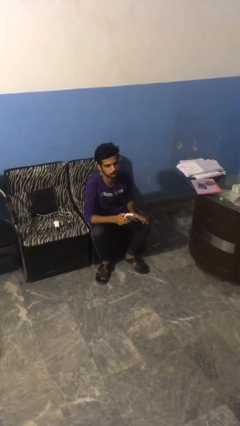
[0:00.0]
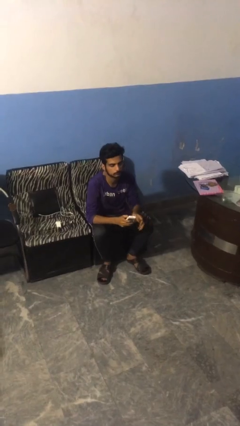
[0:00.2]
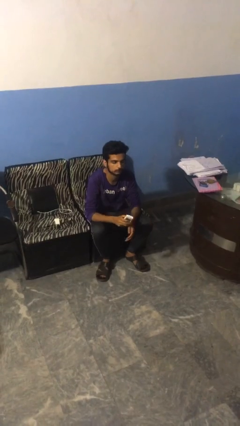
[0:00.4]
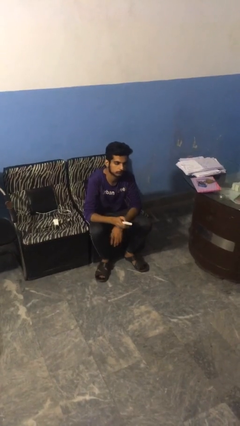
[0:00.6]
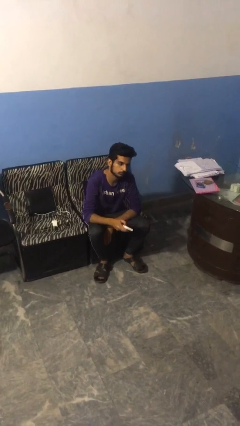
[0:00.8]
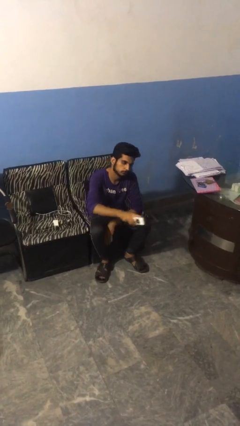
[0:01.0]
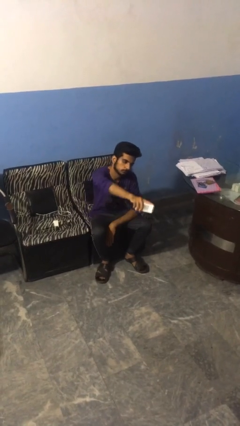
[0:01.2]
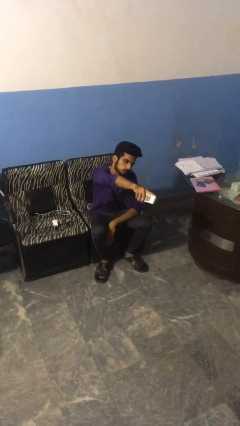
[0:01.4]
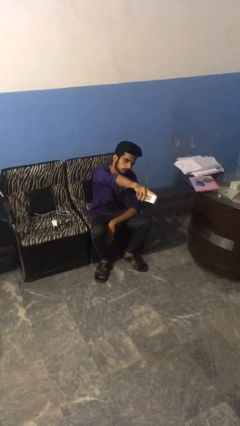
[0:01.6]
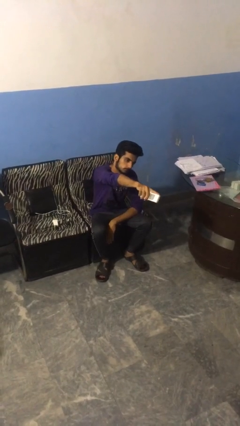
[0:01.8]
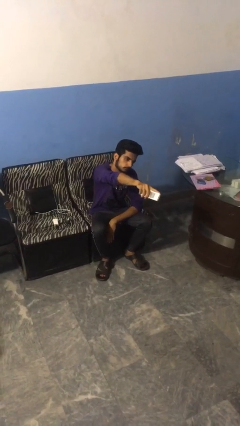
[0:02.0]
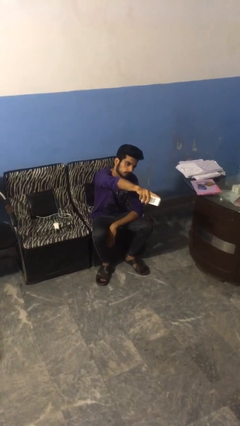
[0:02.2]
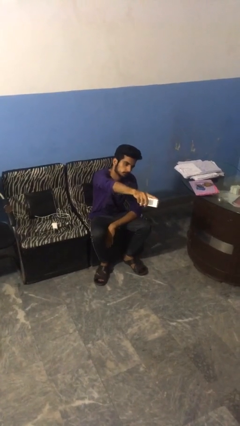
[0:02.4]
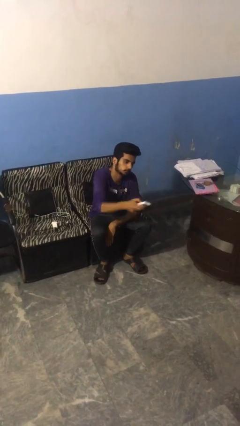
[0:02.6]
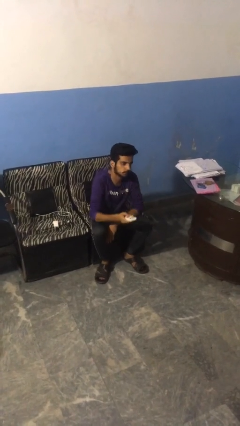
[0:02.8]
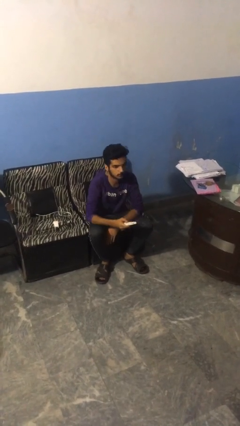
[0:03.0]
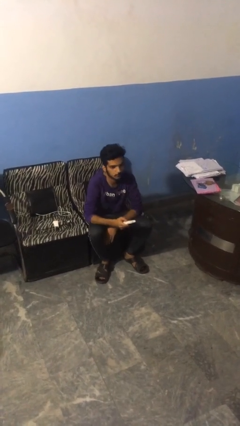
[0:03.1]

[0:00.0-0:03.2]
person uses television remote

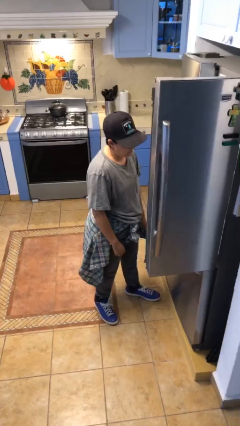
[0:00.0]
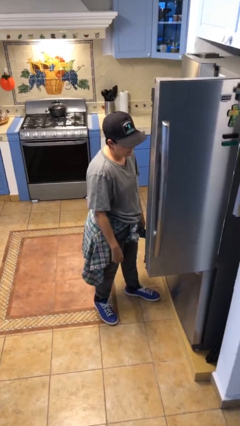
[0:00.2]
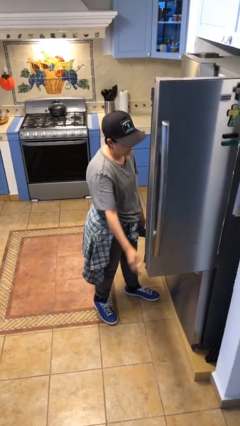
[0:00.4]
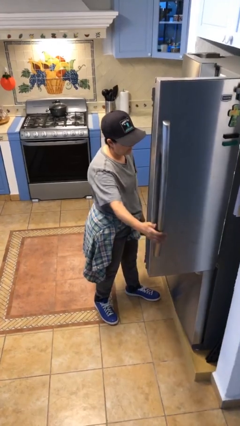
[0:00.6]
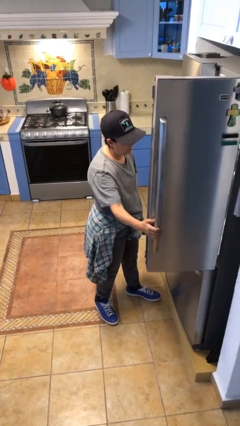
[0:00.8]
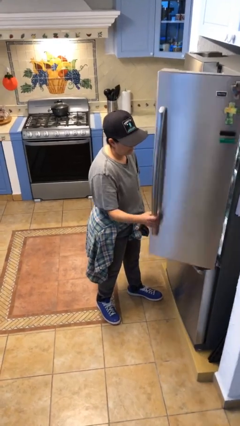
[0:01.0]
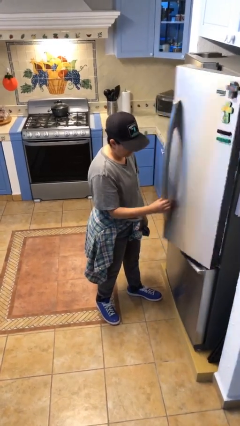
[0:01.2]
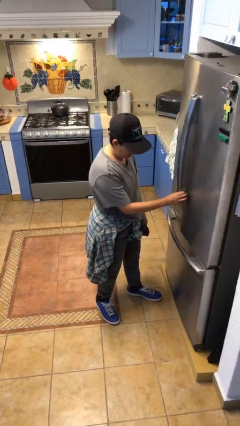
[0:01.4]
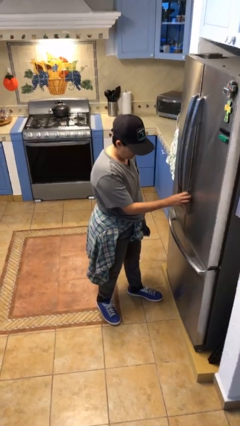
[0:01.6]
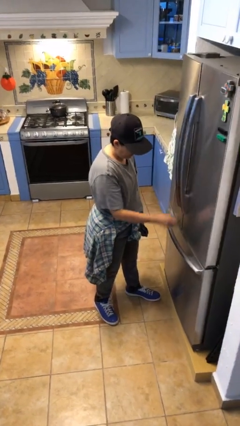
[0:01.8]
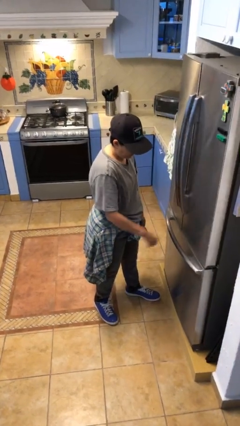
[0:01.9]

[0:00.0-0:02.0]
person closes refrigerator

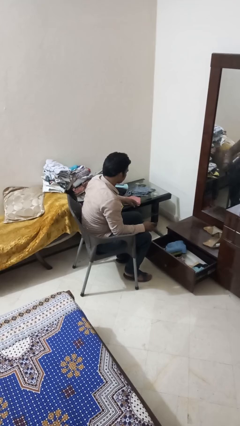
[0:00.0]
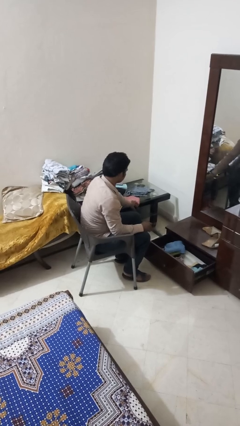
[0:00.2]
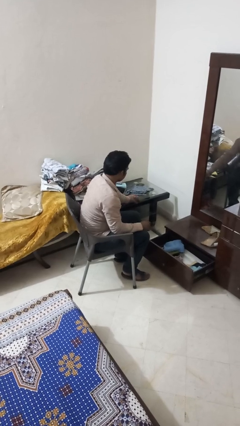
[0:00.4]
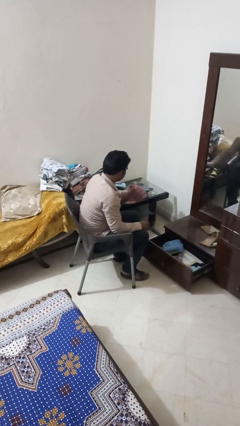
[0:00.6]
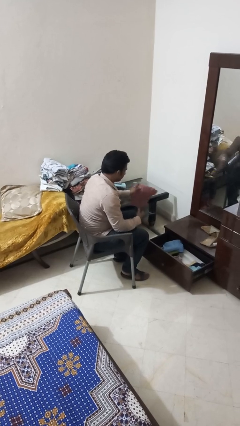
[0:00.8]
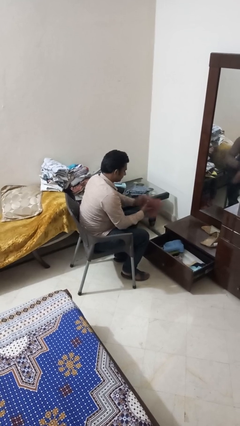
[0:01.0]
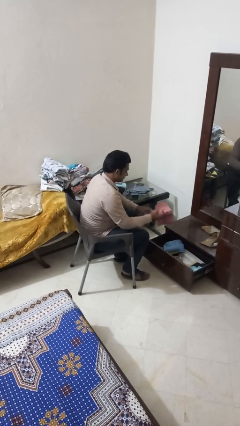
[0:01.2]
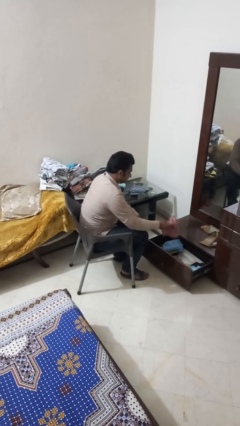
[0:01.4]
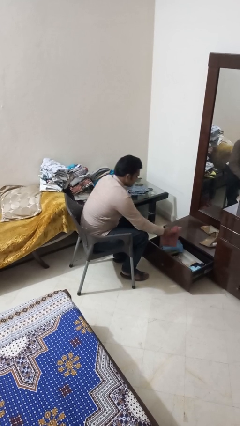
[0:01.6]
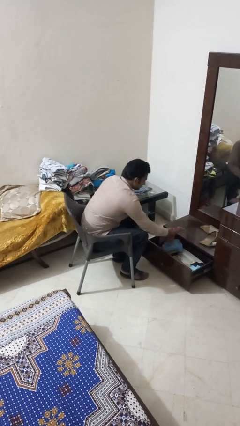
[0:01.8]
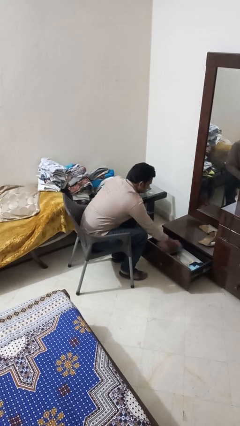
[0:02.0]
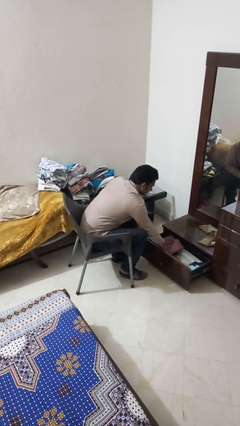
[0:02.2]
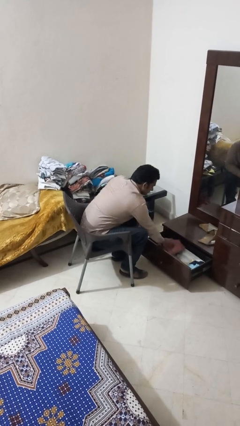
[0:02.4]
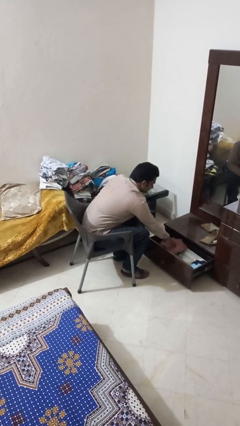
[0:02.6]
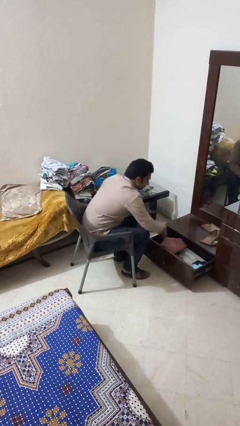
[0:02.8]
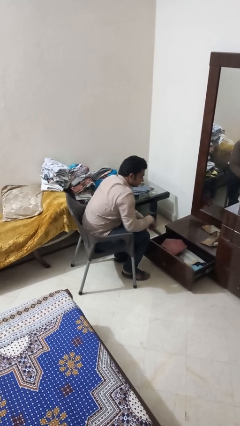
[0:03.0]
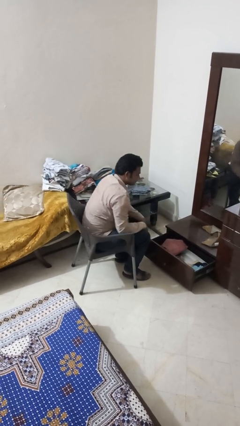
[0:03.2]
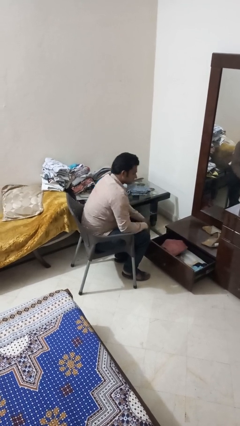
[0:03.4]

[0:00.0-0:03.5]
person puts clothes into dresser

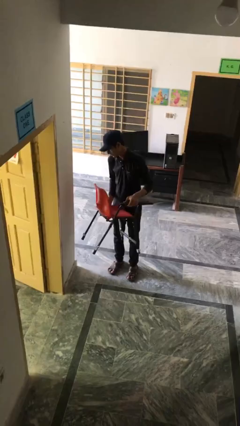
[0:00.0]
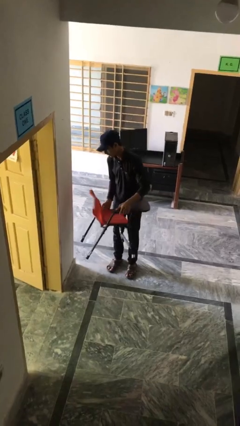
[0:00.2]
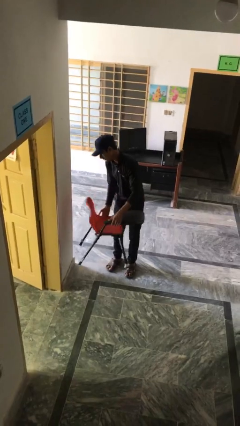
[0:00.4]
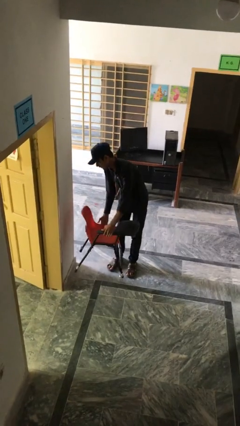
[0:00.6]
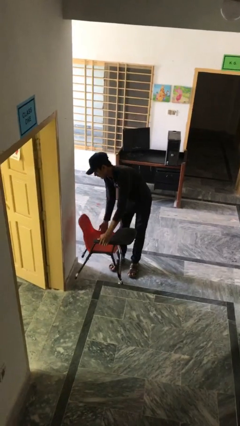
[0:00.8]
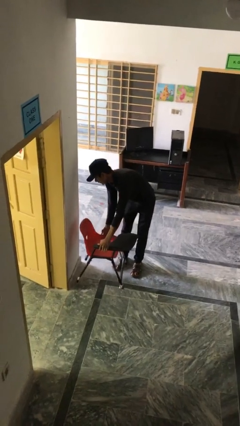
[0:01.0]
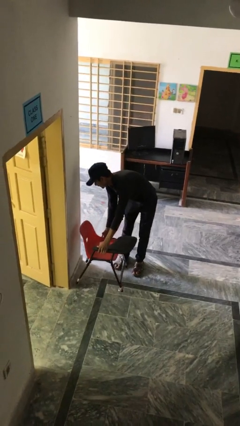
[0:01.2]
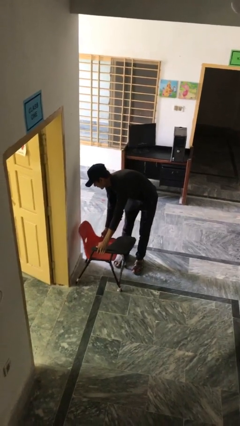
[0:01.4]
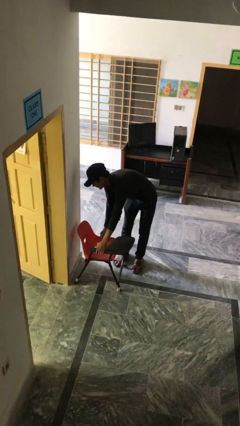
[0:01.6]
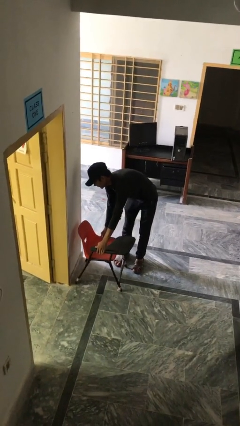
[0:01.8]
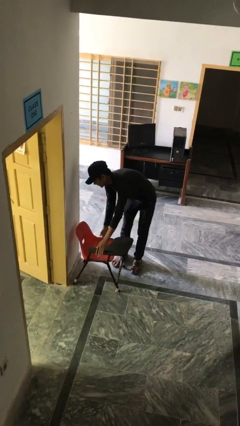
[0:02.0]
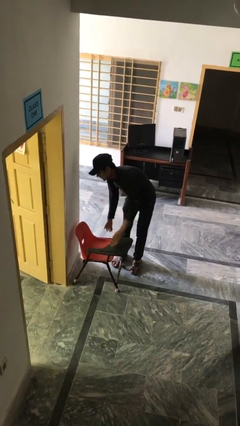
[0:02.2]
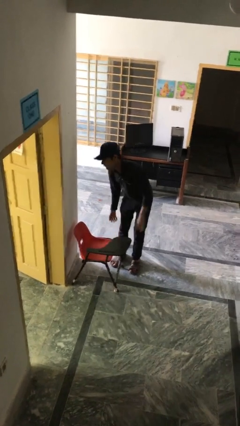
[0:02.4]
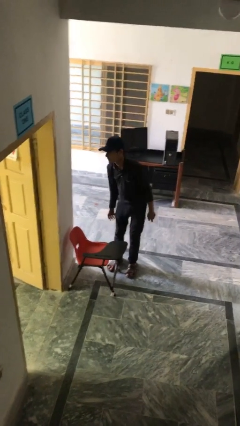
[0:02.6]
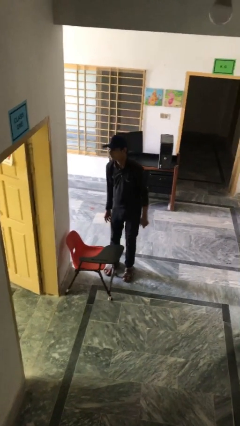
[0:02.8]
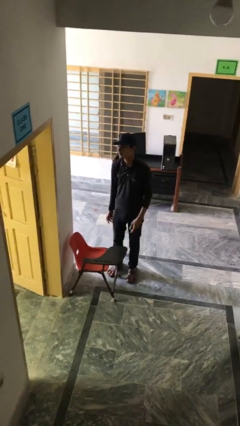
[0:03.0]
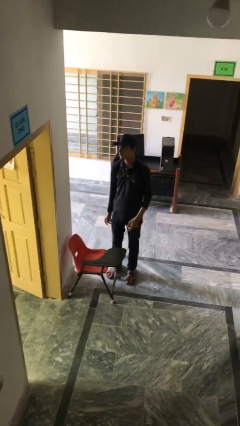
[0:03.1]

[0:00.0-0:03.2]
person puts down object on floor

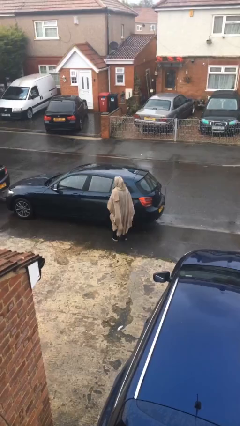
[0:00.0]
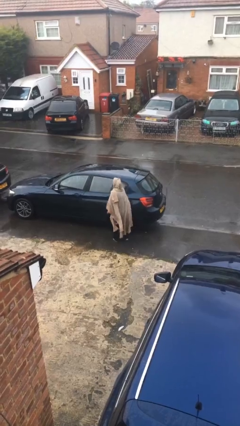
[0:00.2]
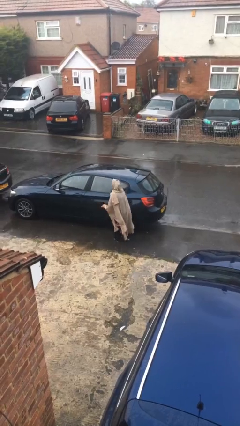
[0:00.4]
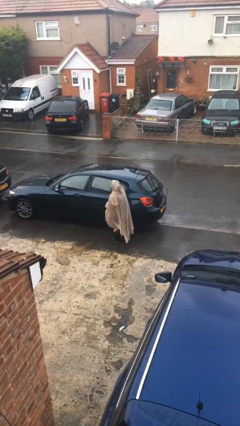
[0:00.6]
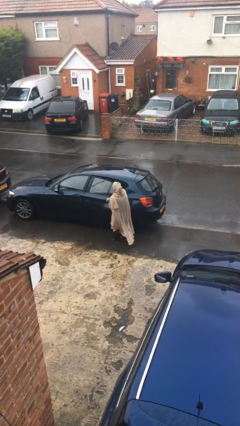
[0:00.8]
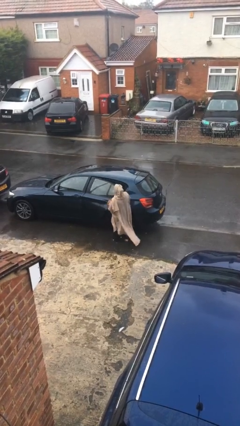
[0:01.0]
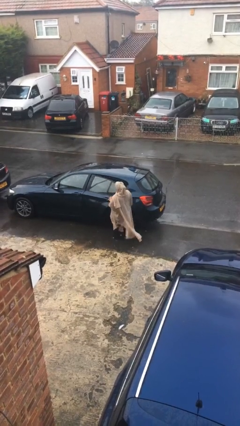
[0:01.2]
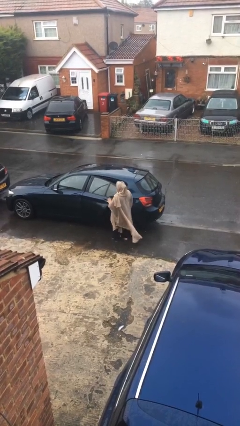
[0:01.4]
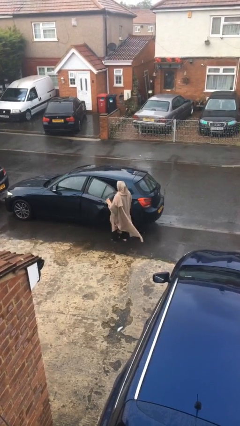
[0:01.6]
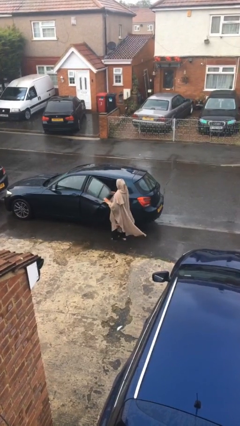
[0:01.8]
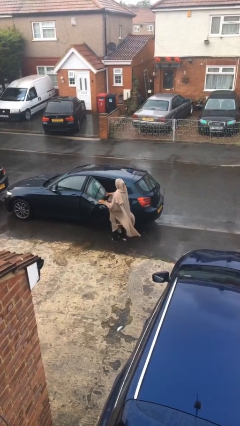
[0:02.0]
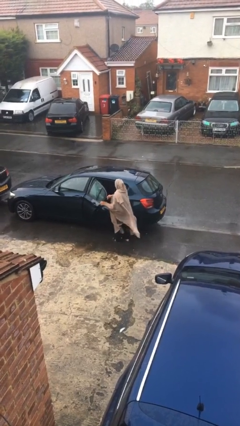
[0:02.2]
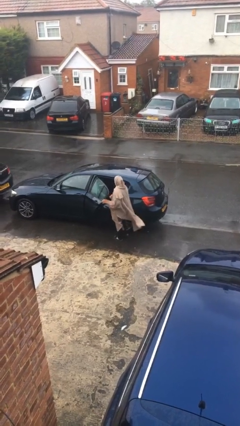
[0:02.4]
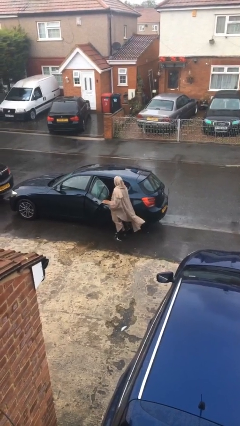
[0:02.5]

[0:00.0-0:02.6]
person opens car door

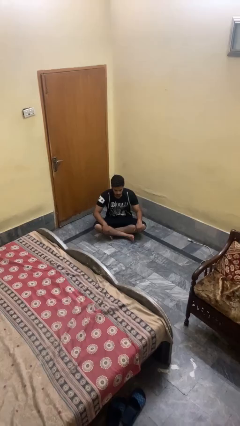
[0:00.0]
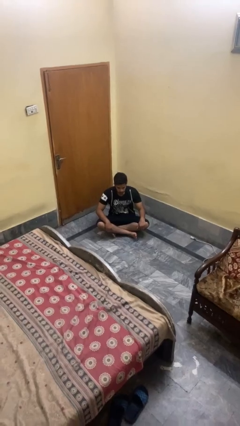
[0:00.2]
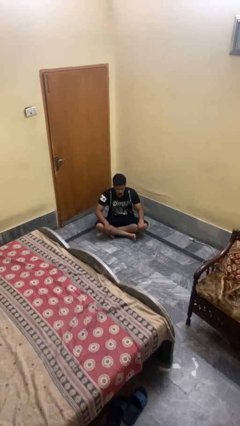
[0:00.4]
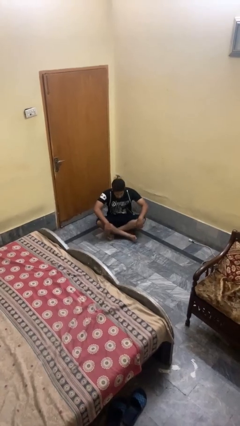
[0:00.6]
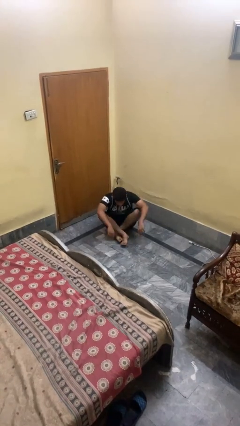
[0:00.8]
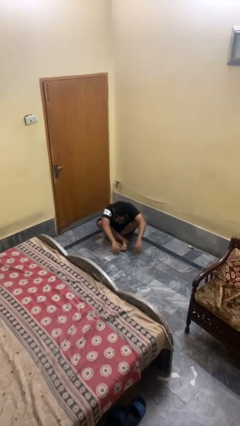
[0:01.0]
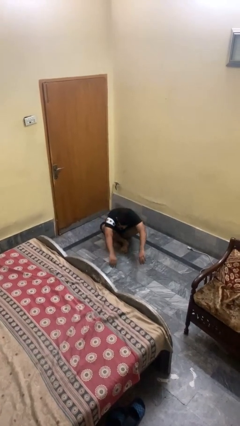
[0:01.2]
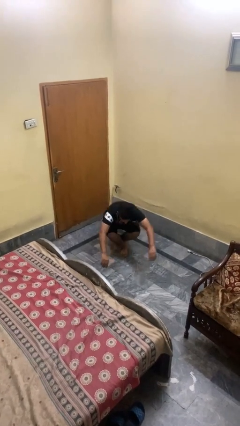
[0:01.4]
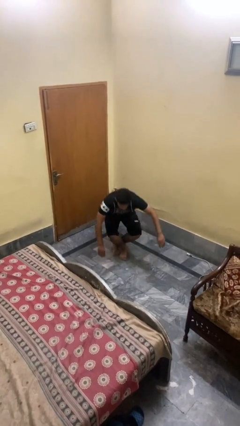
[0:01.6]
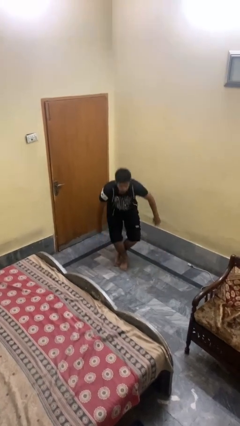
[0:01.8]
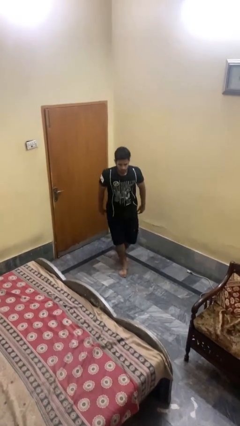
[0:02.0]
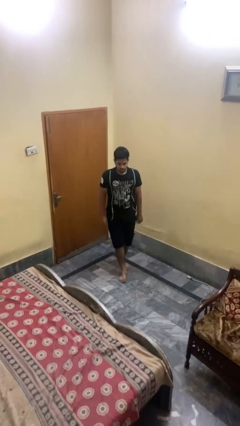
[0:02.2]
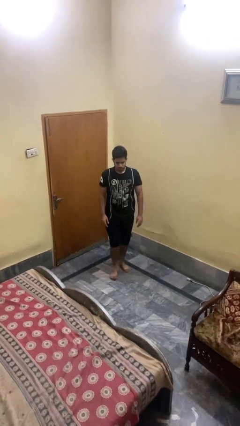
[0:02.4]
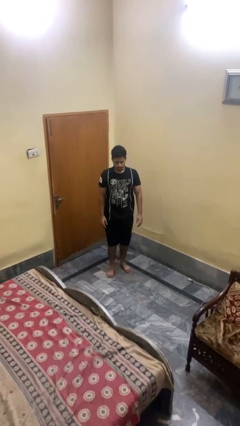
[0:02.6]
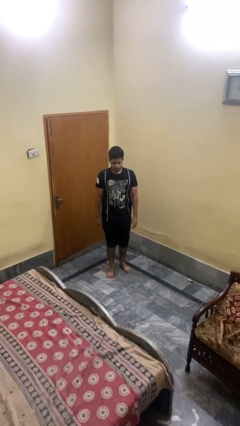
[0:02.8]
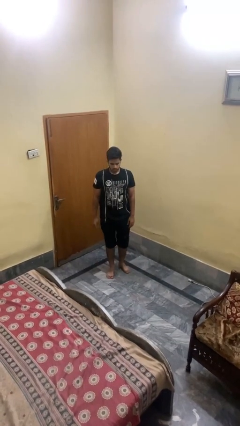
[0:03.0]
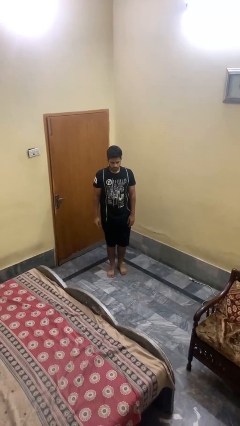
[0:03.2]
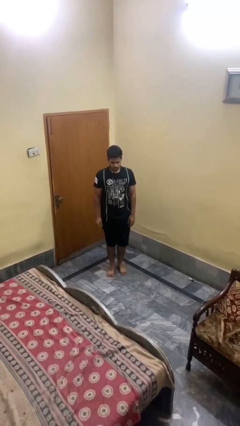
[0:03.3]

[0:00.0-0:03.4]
person stands up from floor
